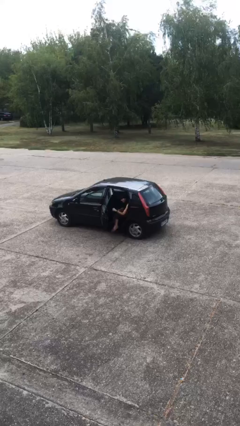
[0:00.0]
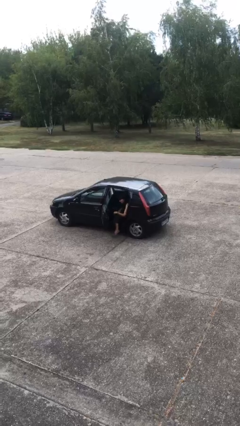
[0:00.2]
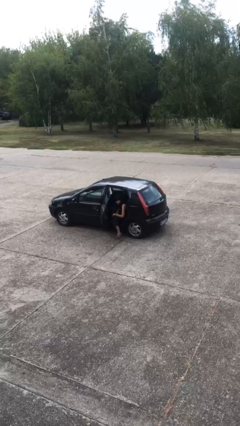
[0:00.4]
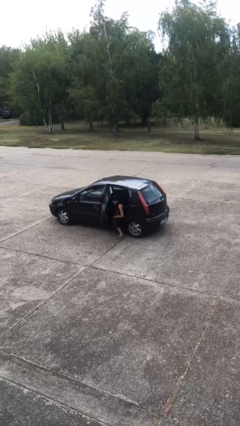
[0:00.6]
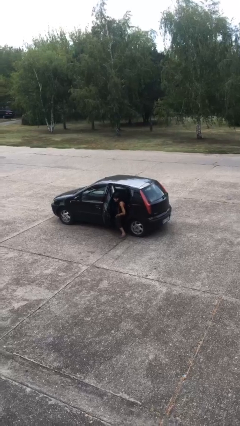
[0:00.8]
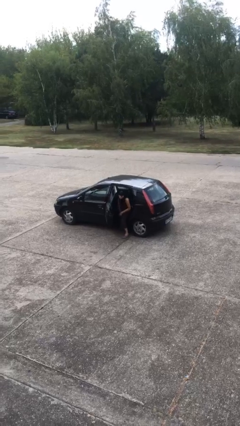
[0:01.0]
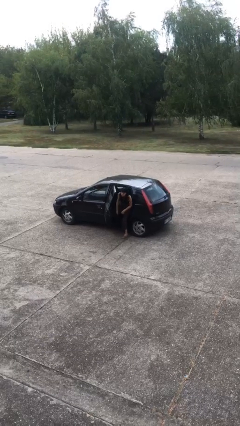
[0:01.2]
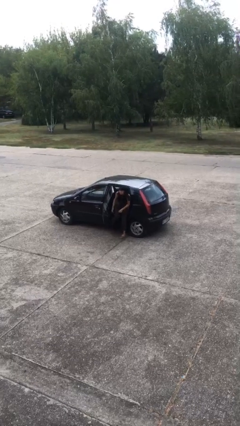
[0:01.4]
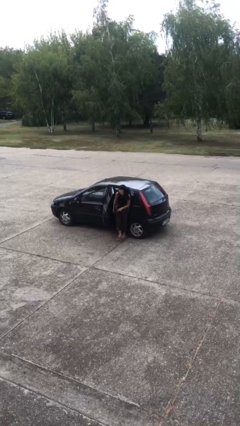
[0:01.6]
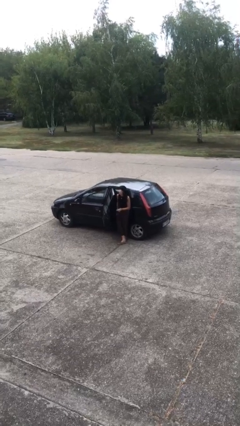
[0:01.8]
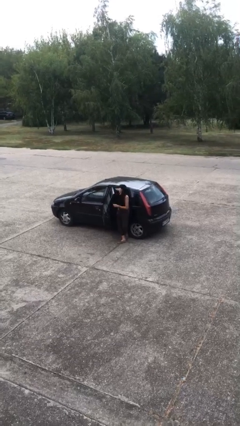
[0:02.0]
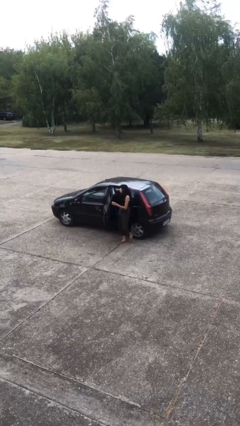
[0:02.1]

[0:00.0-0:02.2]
person exits car

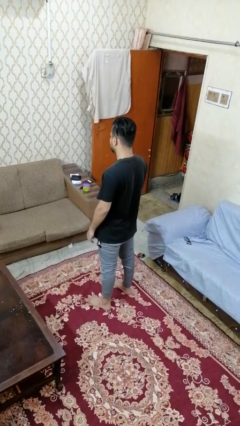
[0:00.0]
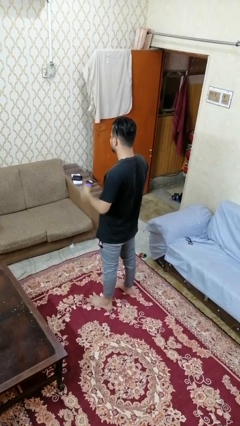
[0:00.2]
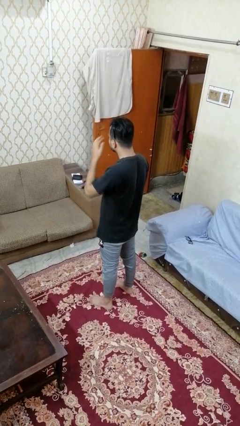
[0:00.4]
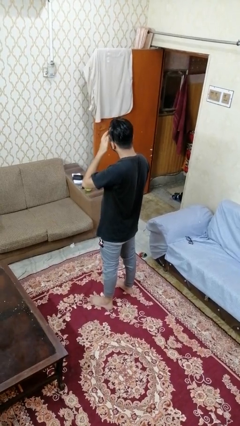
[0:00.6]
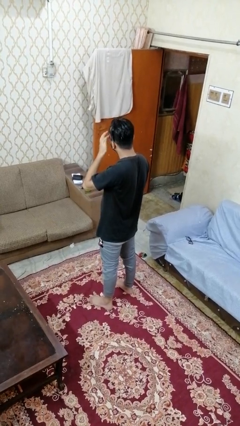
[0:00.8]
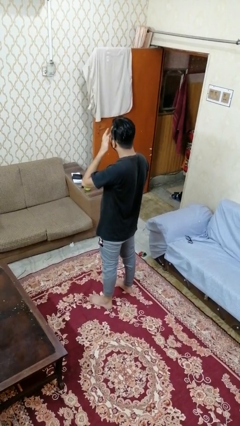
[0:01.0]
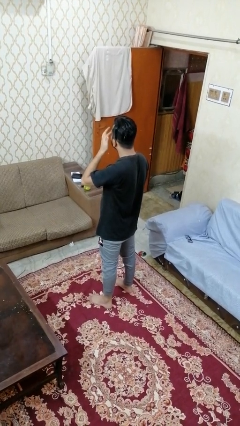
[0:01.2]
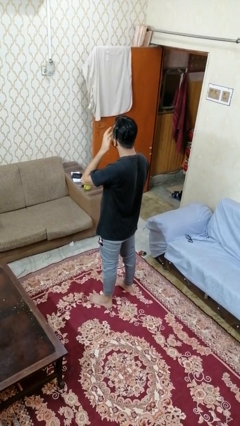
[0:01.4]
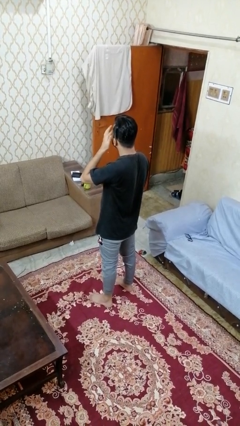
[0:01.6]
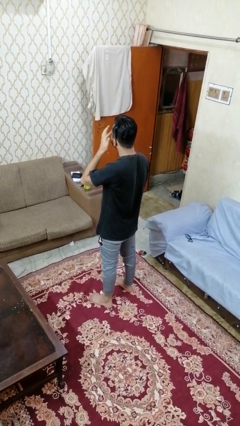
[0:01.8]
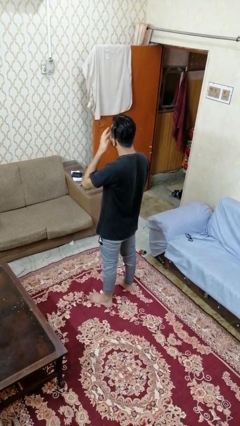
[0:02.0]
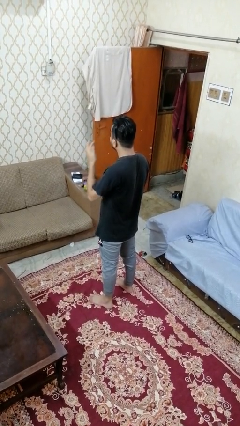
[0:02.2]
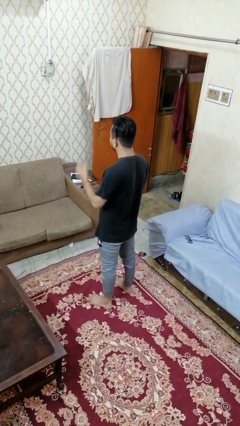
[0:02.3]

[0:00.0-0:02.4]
person rubs eyes

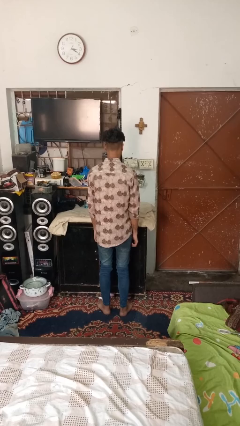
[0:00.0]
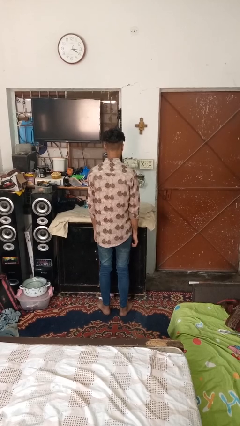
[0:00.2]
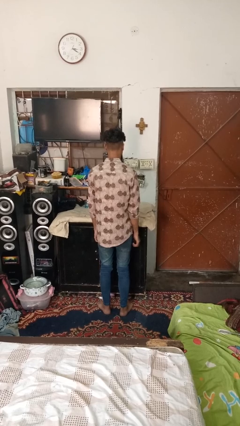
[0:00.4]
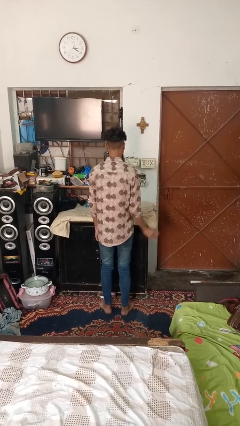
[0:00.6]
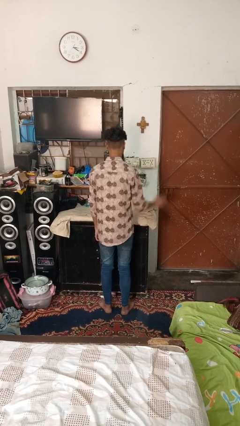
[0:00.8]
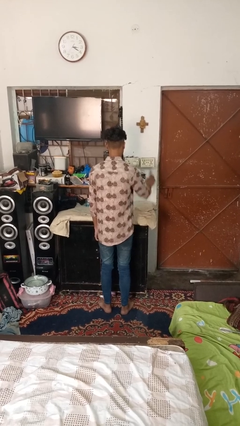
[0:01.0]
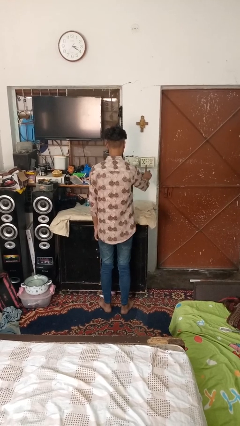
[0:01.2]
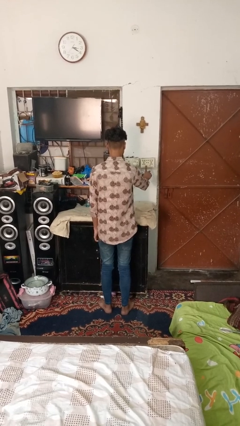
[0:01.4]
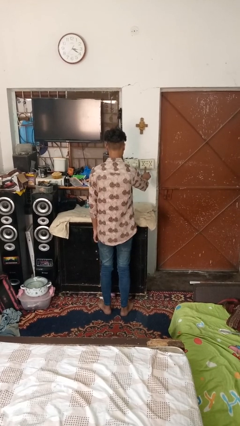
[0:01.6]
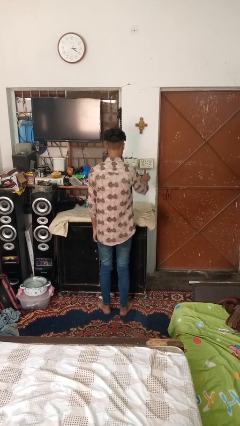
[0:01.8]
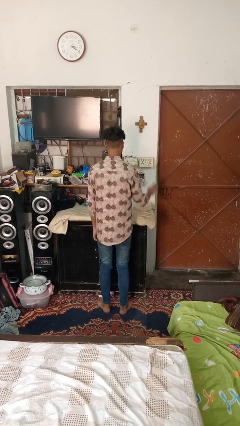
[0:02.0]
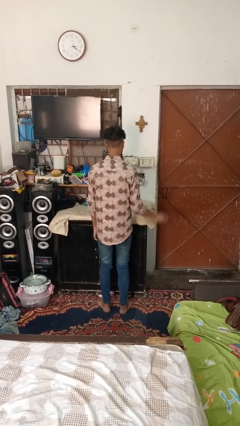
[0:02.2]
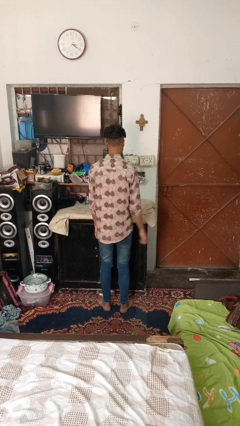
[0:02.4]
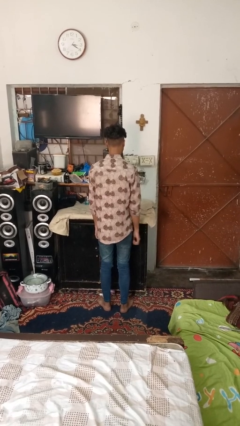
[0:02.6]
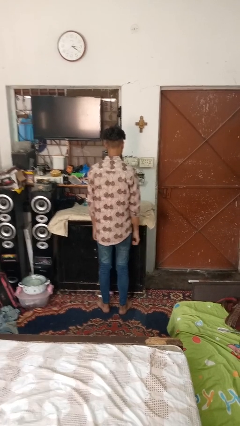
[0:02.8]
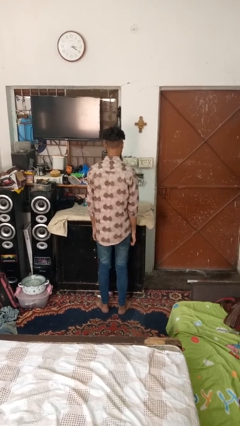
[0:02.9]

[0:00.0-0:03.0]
person turns on fan

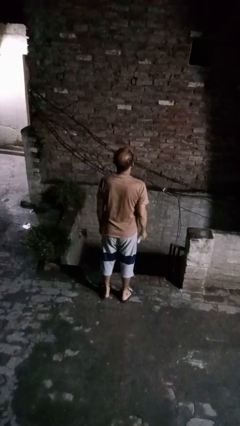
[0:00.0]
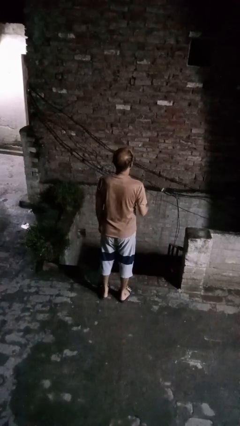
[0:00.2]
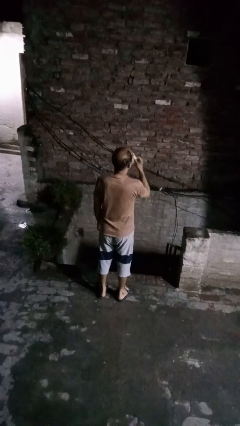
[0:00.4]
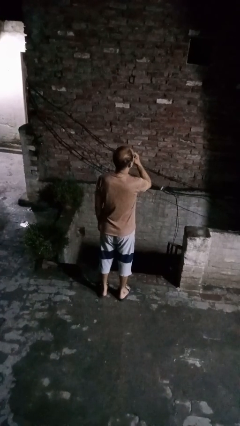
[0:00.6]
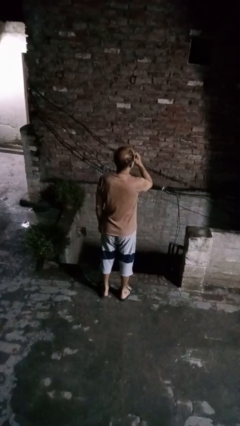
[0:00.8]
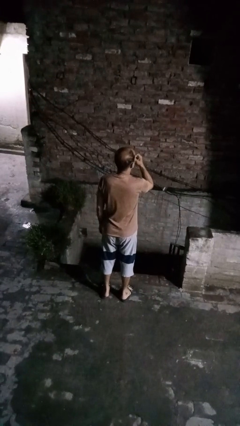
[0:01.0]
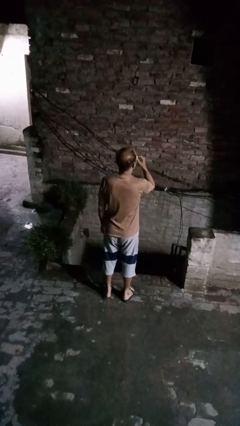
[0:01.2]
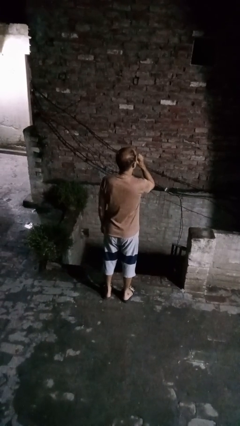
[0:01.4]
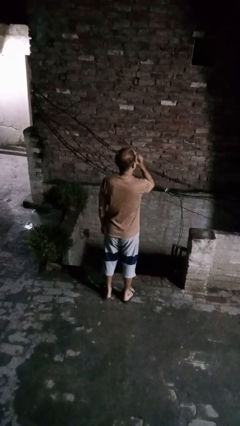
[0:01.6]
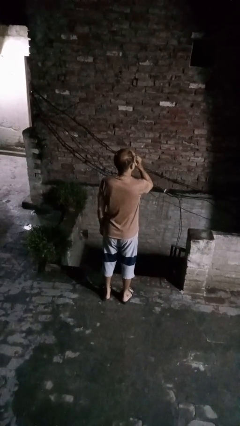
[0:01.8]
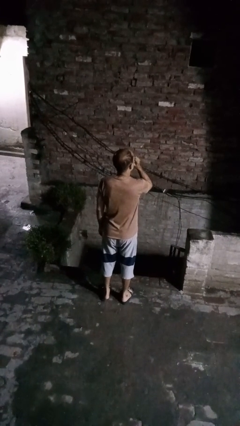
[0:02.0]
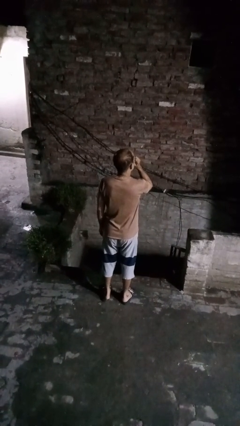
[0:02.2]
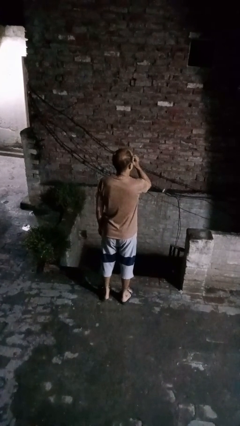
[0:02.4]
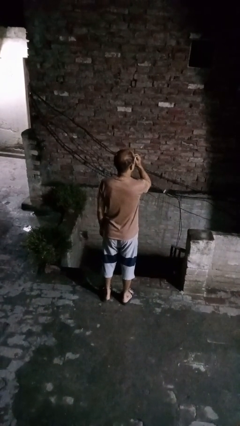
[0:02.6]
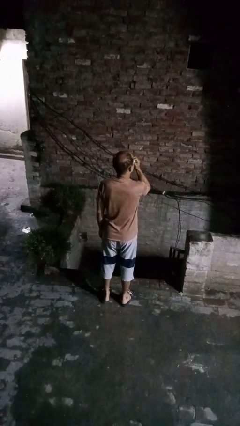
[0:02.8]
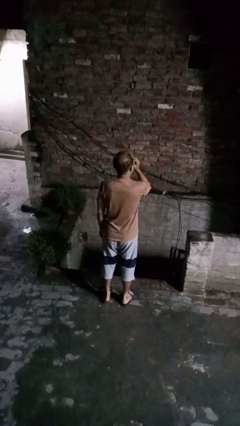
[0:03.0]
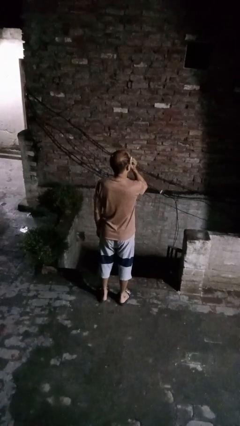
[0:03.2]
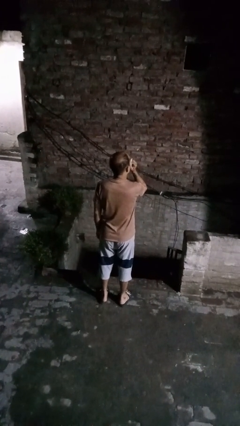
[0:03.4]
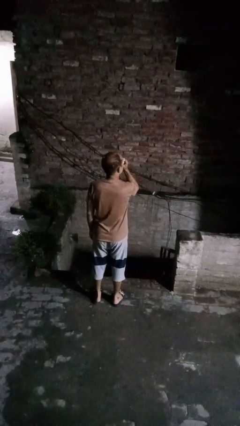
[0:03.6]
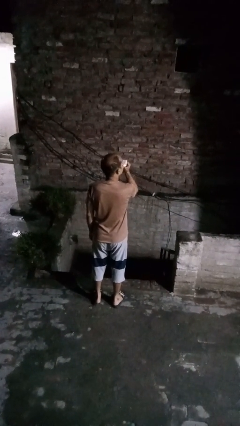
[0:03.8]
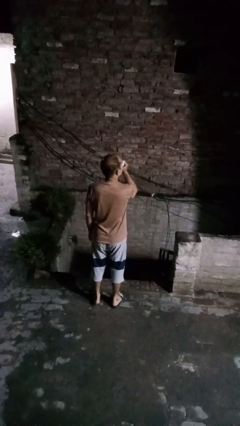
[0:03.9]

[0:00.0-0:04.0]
person blows nose

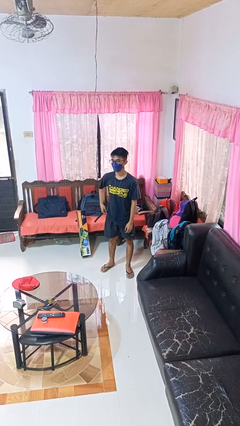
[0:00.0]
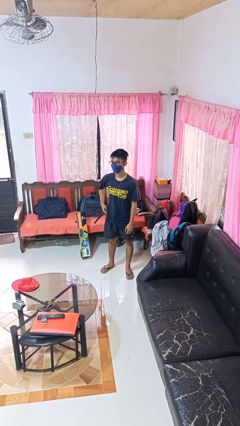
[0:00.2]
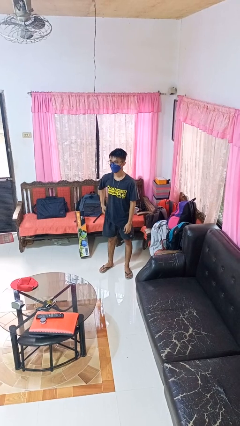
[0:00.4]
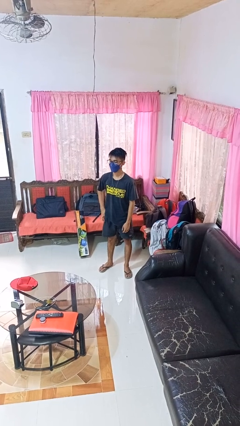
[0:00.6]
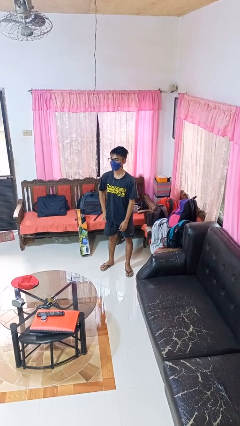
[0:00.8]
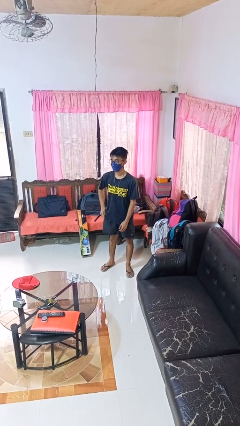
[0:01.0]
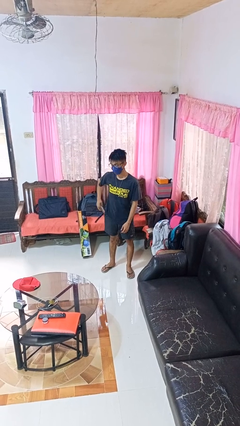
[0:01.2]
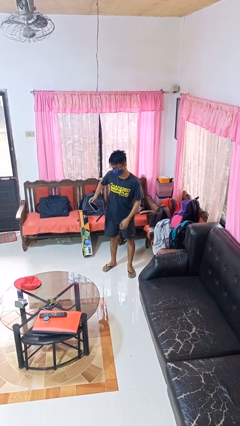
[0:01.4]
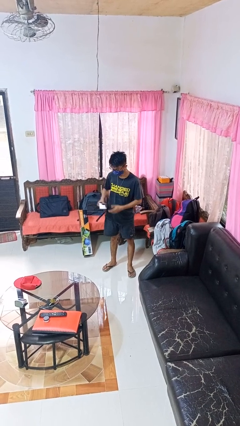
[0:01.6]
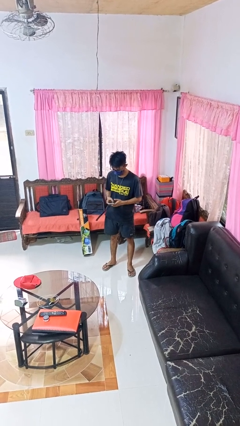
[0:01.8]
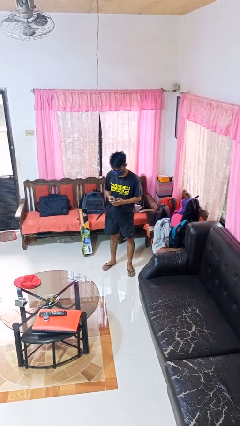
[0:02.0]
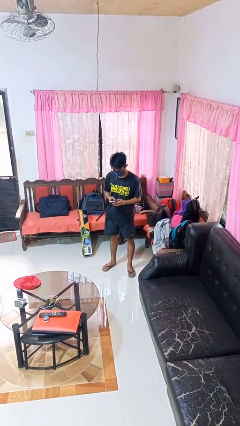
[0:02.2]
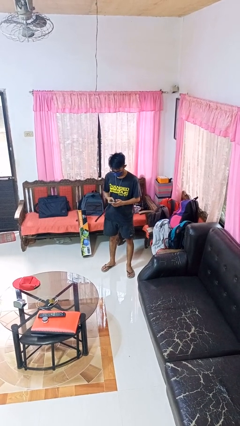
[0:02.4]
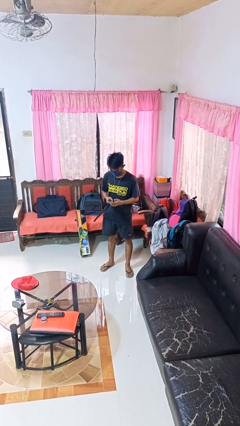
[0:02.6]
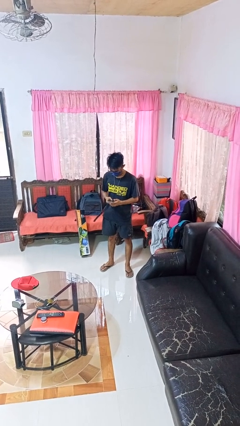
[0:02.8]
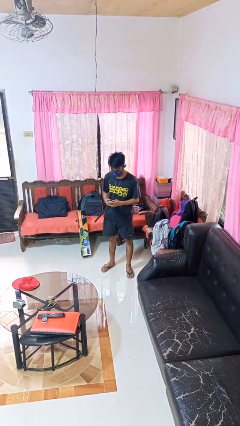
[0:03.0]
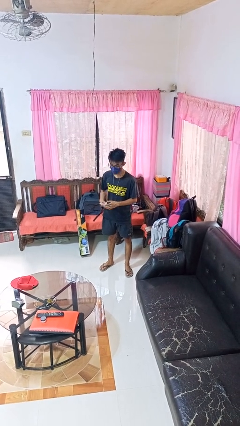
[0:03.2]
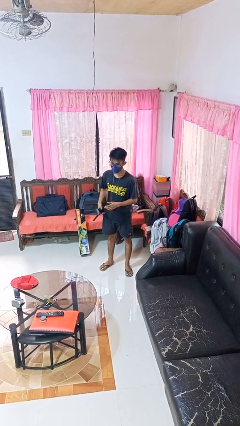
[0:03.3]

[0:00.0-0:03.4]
person takes phone from pocket

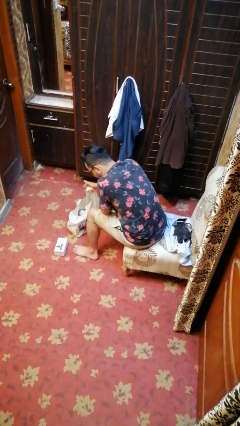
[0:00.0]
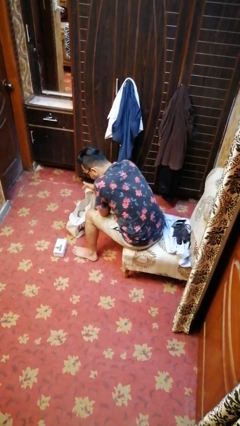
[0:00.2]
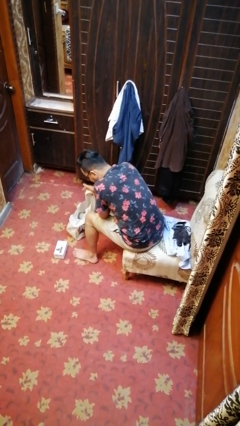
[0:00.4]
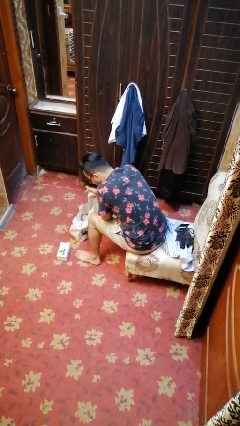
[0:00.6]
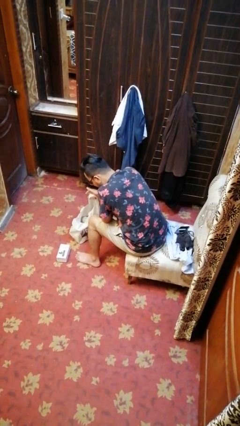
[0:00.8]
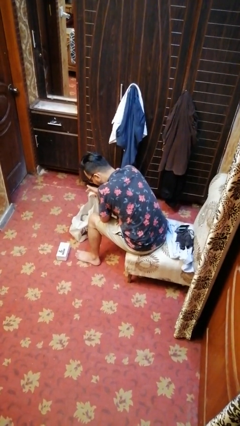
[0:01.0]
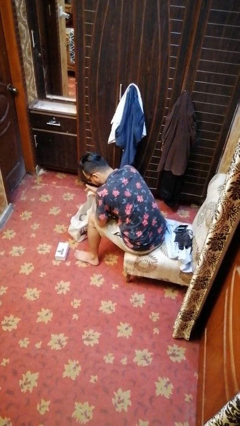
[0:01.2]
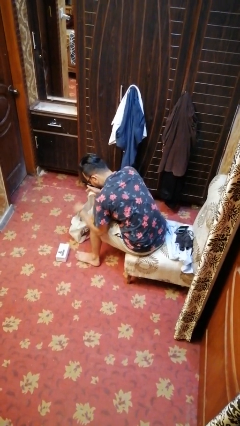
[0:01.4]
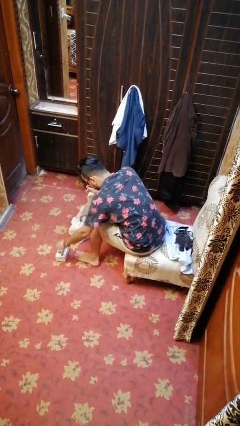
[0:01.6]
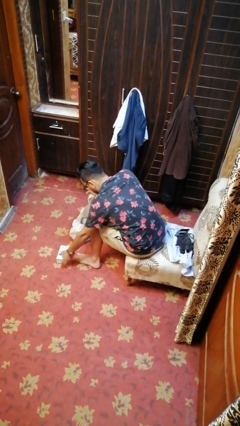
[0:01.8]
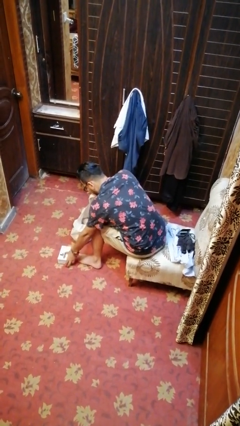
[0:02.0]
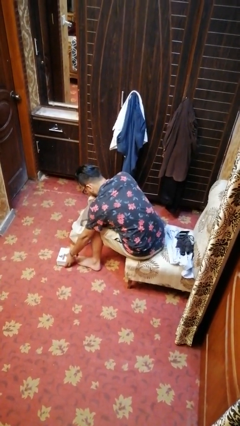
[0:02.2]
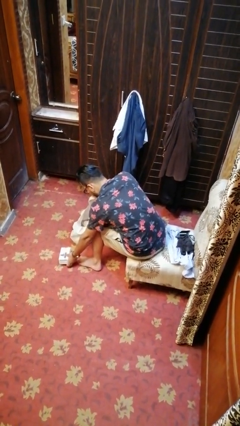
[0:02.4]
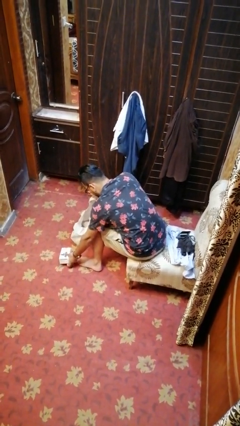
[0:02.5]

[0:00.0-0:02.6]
person puts object into bag
